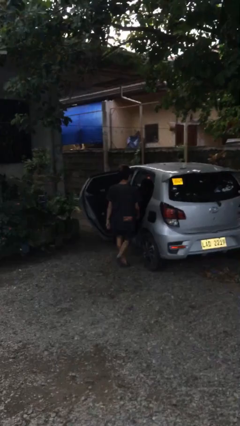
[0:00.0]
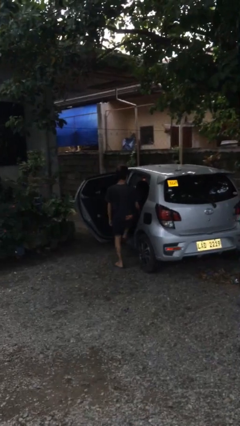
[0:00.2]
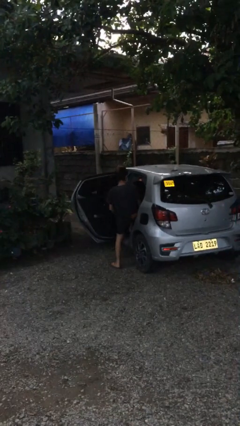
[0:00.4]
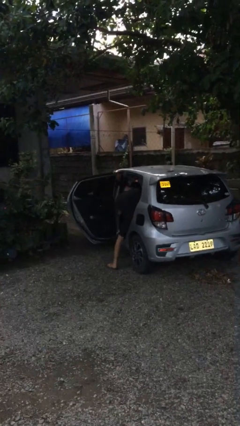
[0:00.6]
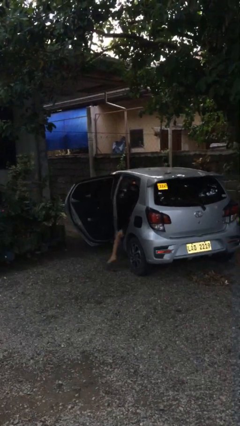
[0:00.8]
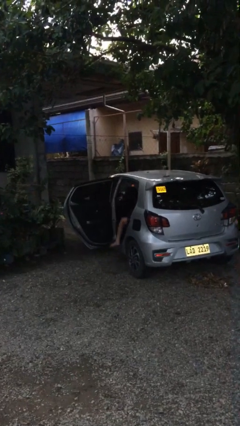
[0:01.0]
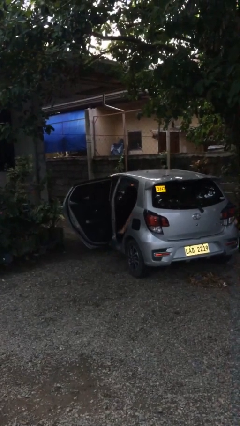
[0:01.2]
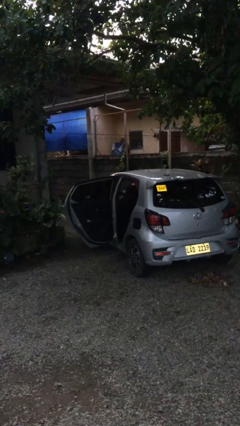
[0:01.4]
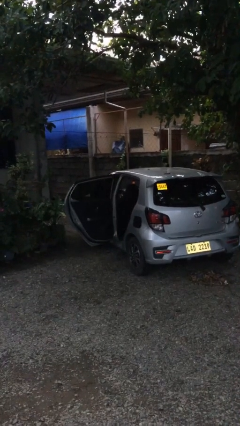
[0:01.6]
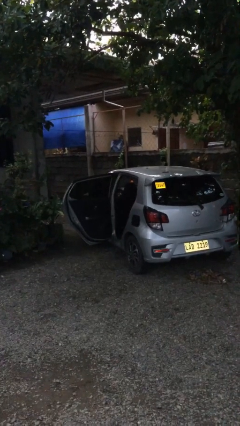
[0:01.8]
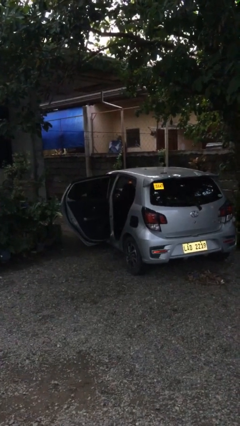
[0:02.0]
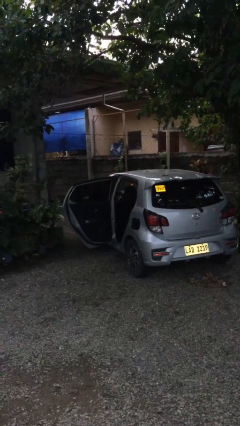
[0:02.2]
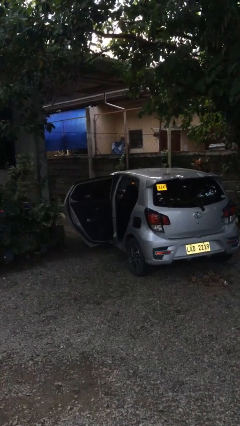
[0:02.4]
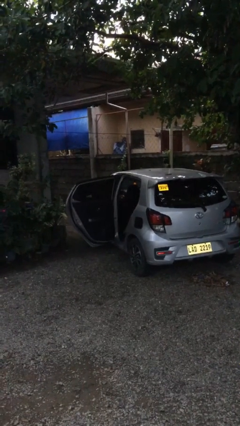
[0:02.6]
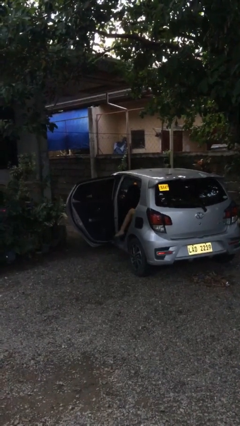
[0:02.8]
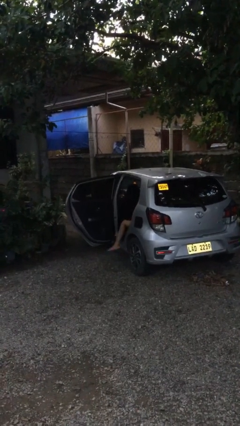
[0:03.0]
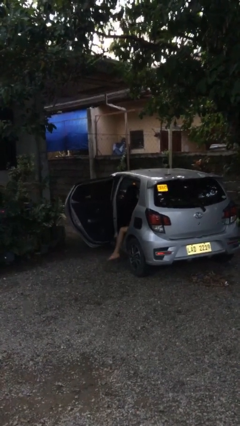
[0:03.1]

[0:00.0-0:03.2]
person enters car

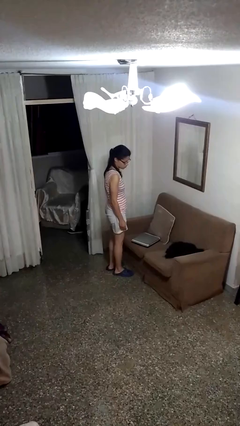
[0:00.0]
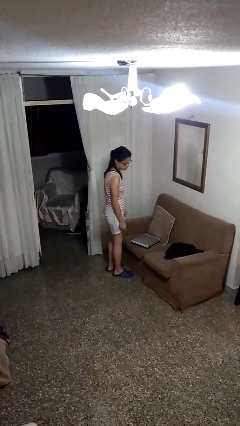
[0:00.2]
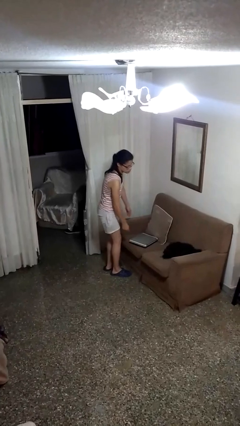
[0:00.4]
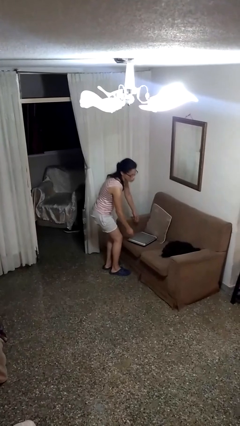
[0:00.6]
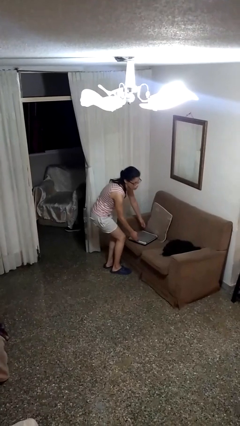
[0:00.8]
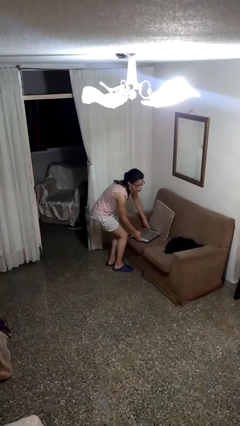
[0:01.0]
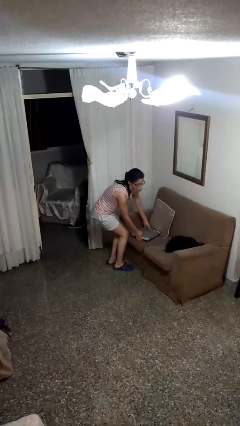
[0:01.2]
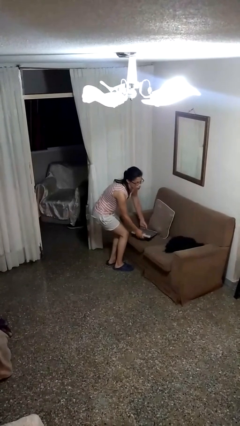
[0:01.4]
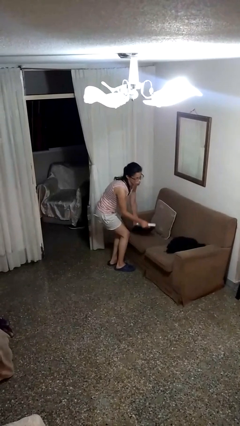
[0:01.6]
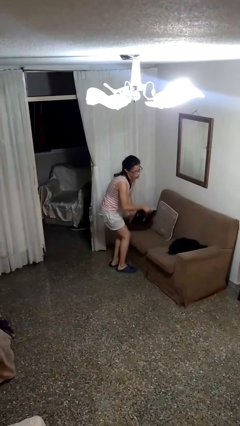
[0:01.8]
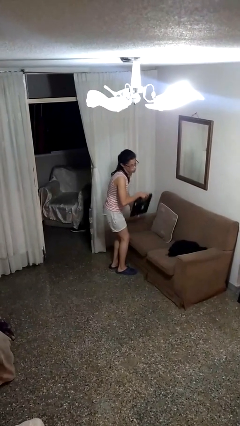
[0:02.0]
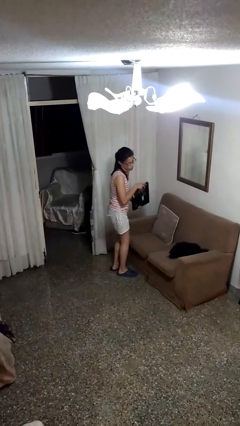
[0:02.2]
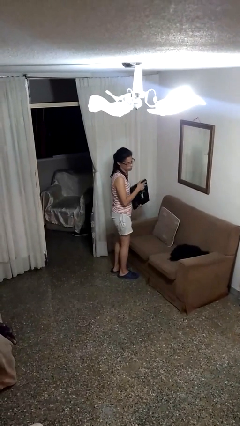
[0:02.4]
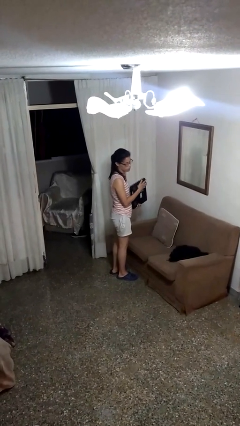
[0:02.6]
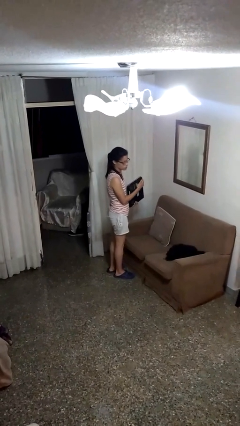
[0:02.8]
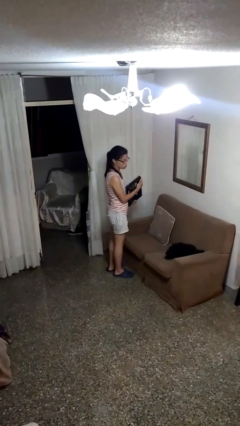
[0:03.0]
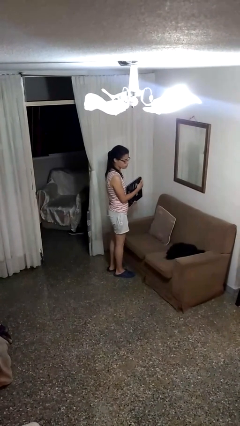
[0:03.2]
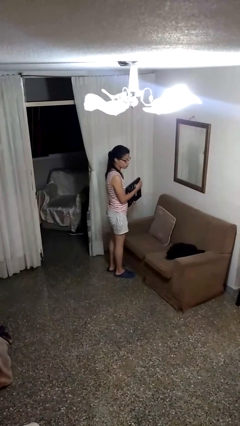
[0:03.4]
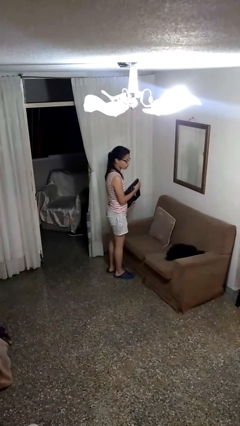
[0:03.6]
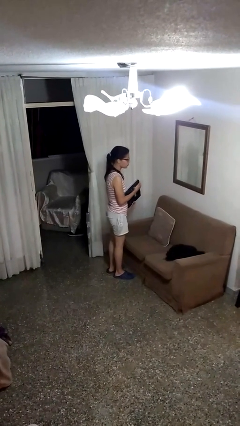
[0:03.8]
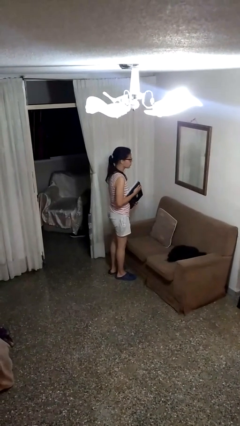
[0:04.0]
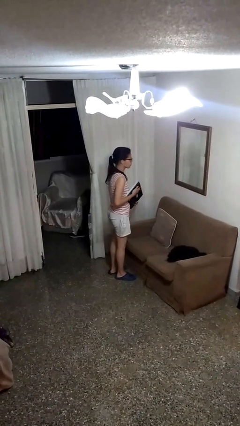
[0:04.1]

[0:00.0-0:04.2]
person picks up object from couch

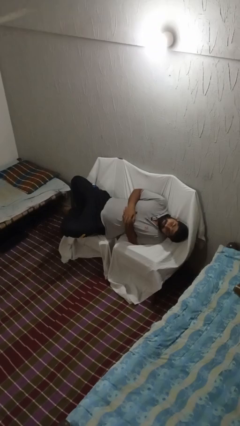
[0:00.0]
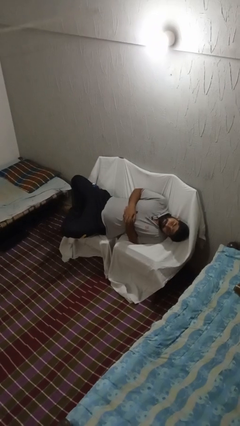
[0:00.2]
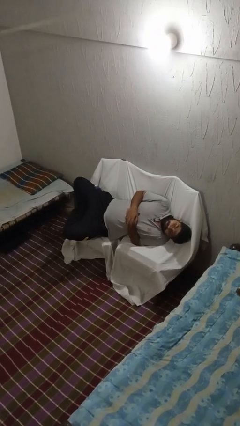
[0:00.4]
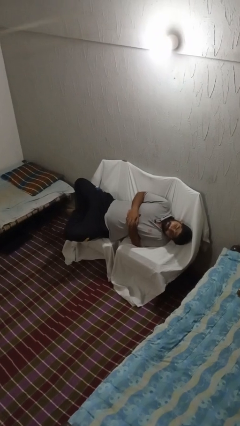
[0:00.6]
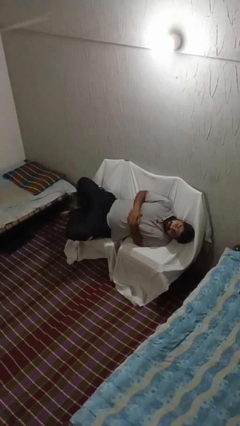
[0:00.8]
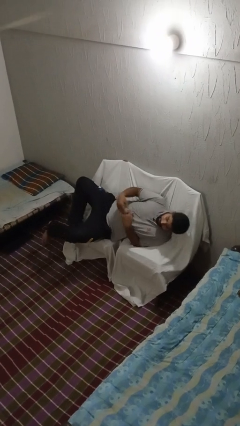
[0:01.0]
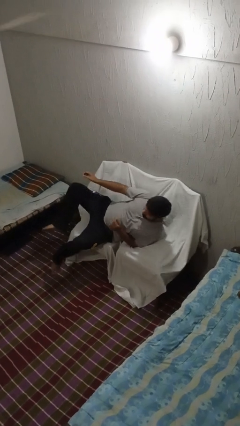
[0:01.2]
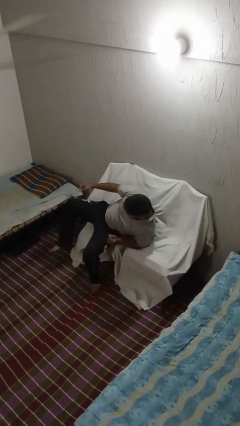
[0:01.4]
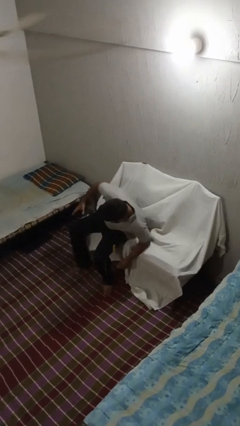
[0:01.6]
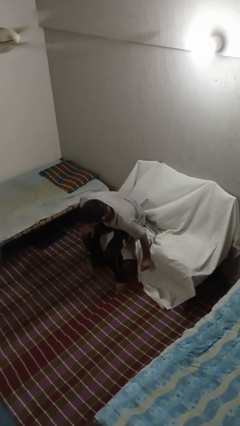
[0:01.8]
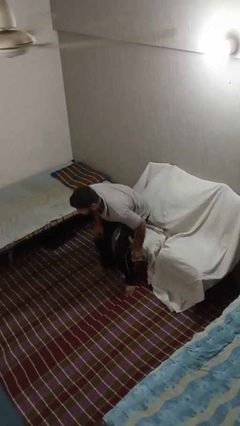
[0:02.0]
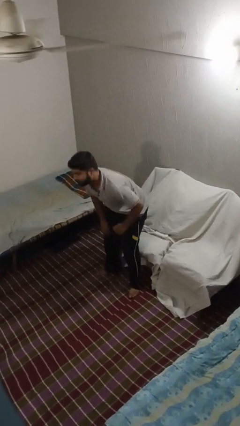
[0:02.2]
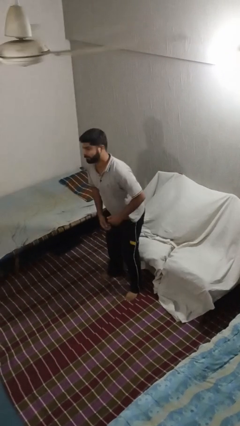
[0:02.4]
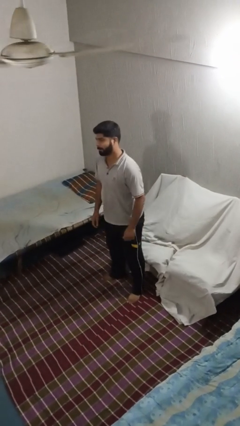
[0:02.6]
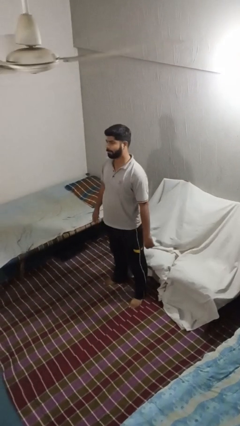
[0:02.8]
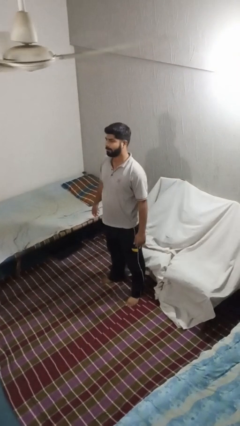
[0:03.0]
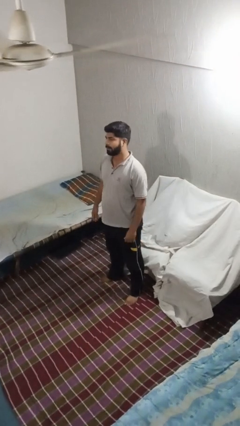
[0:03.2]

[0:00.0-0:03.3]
person stands up

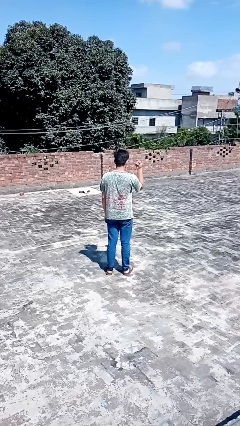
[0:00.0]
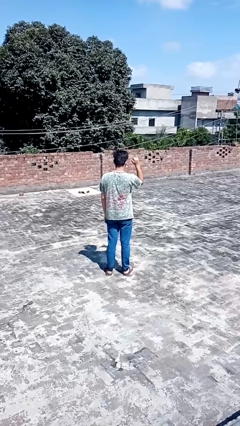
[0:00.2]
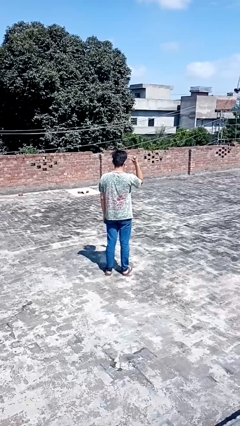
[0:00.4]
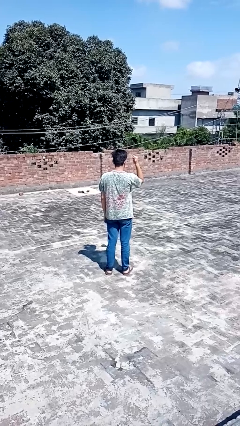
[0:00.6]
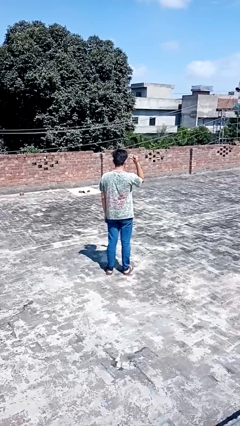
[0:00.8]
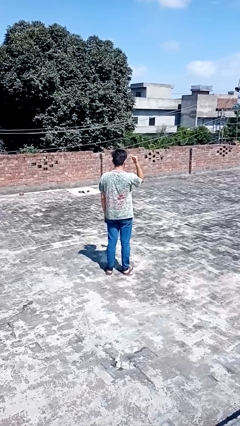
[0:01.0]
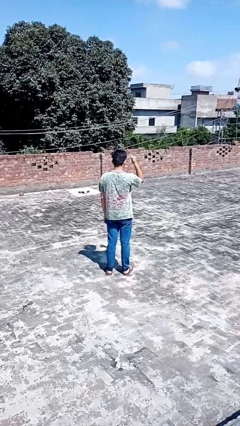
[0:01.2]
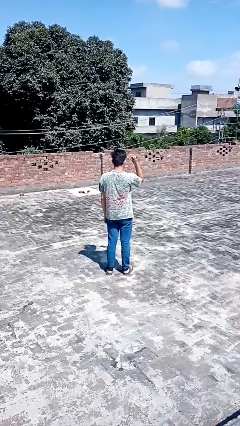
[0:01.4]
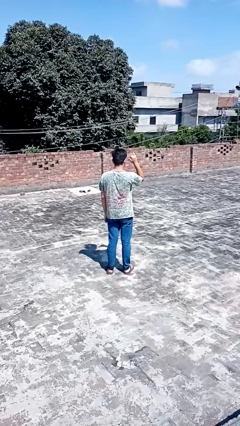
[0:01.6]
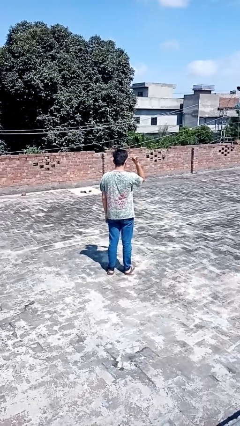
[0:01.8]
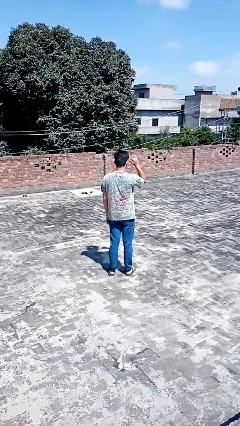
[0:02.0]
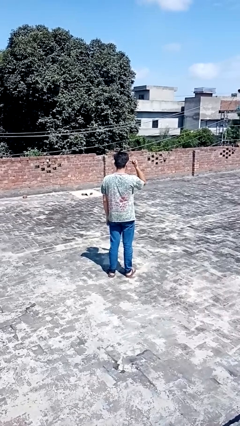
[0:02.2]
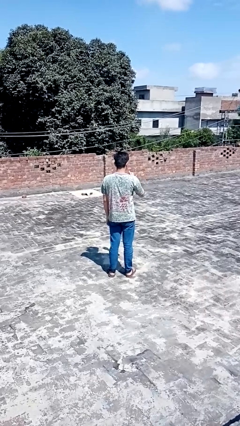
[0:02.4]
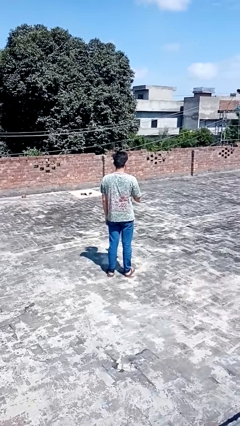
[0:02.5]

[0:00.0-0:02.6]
person gestures hang loose

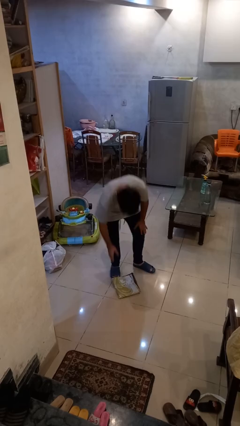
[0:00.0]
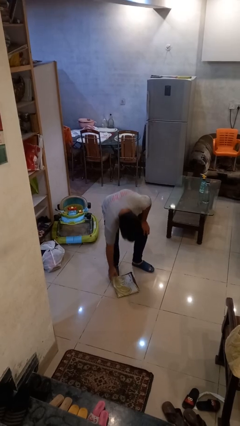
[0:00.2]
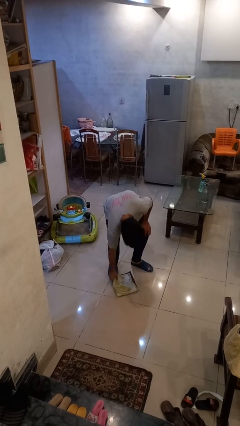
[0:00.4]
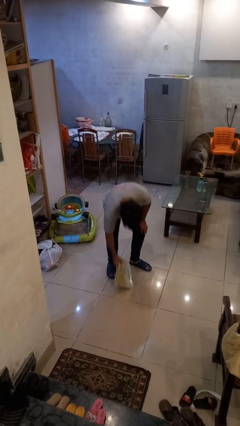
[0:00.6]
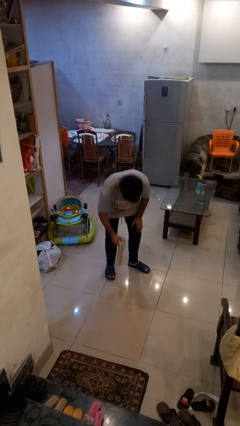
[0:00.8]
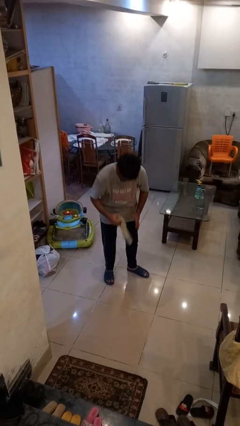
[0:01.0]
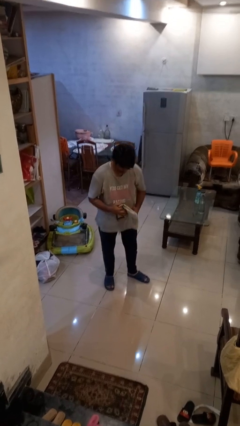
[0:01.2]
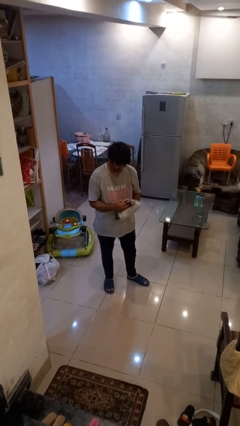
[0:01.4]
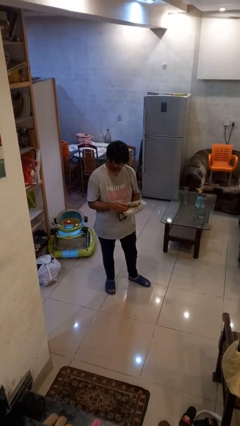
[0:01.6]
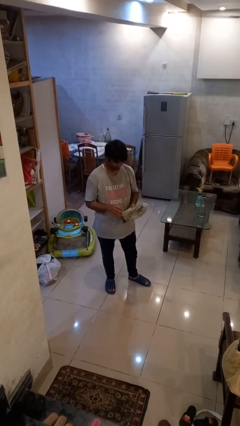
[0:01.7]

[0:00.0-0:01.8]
person picks up object from floor

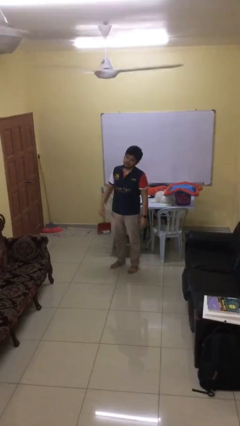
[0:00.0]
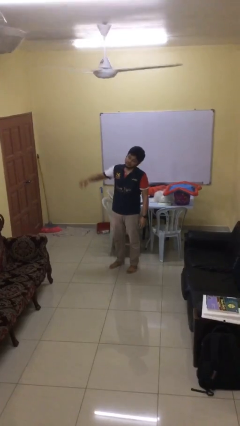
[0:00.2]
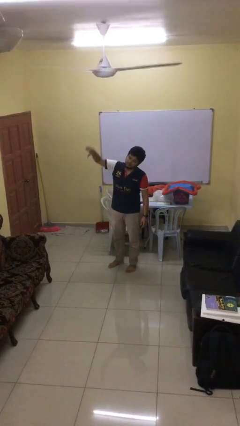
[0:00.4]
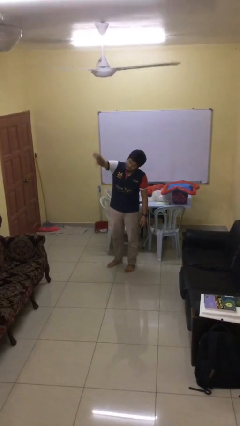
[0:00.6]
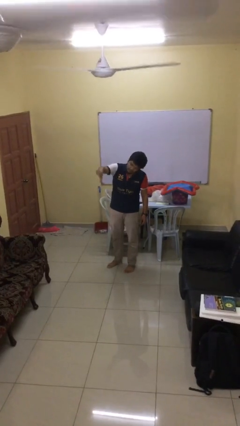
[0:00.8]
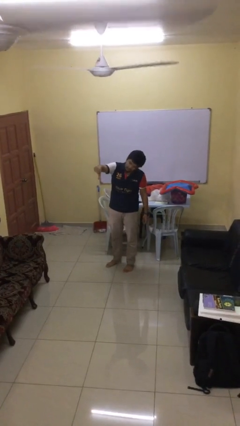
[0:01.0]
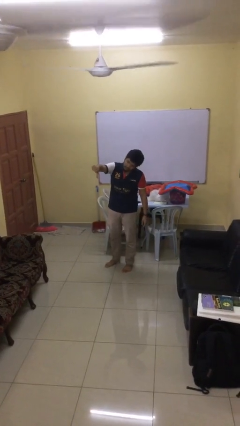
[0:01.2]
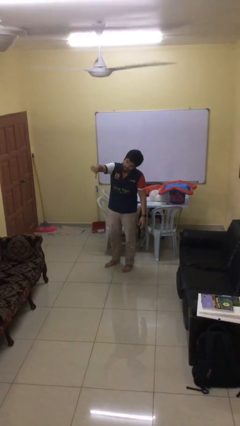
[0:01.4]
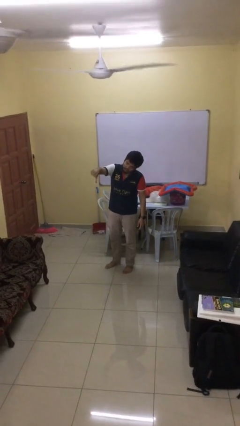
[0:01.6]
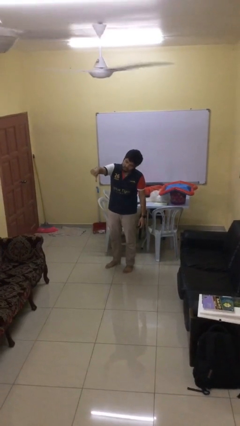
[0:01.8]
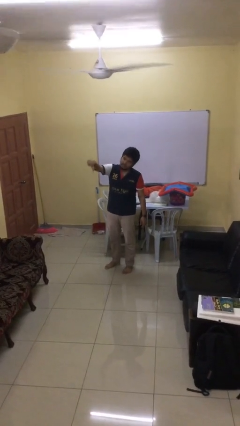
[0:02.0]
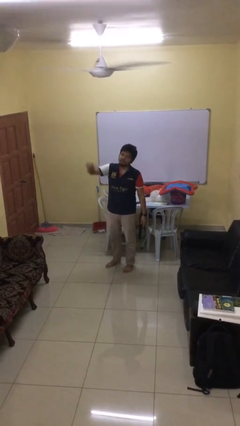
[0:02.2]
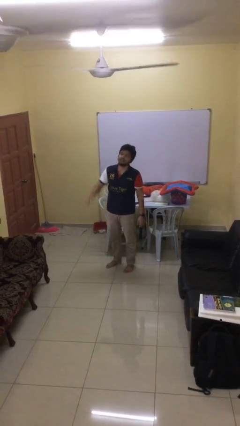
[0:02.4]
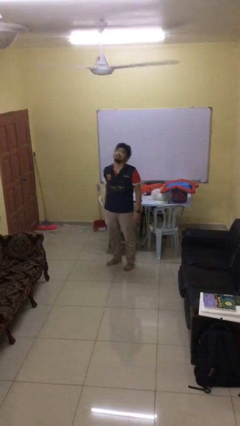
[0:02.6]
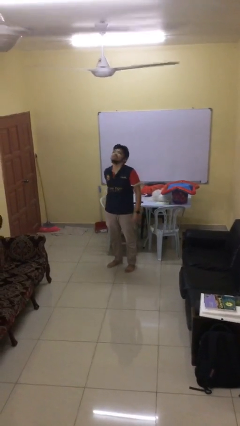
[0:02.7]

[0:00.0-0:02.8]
person gestures thumbs down
